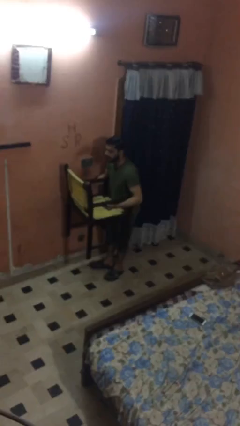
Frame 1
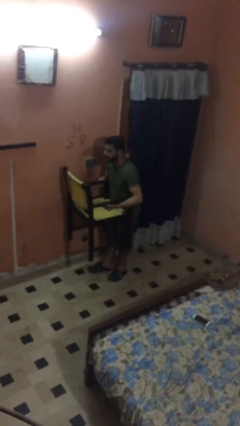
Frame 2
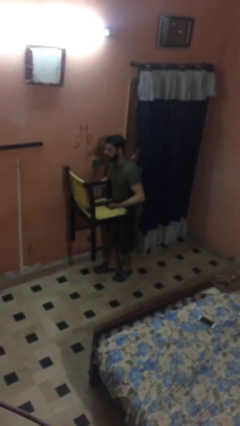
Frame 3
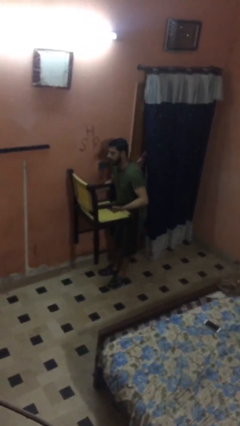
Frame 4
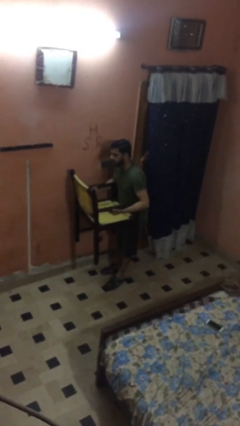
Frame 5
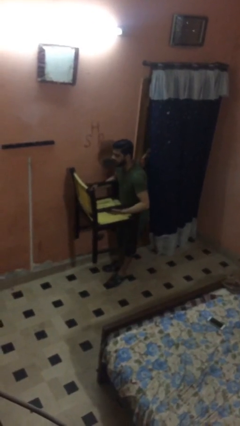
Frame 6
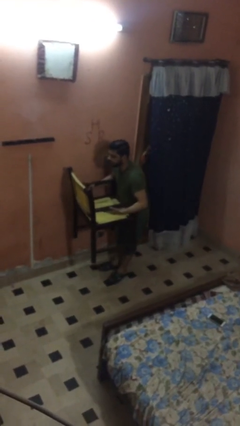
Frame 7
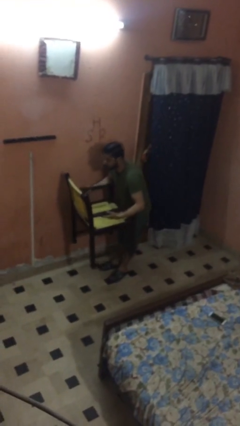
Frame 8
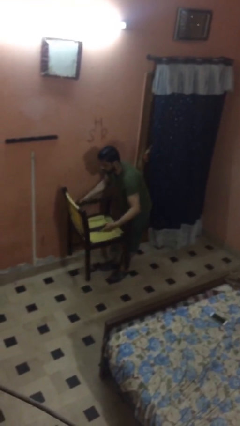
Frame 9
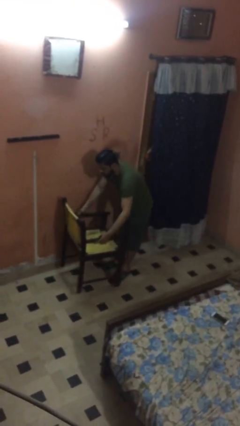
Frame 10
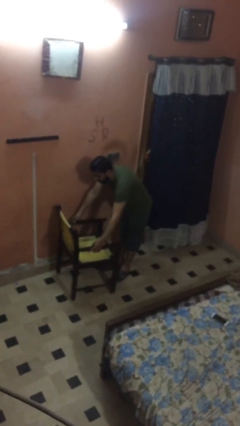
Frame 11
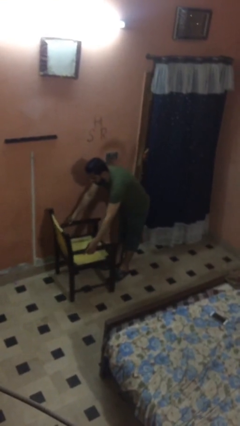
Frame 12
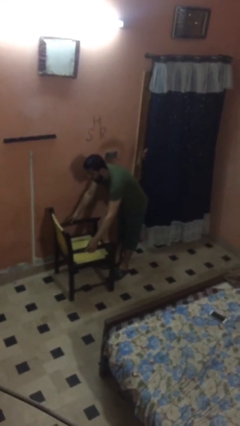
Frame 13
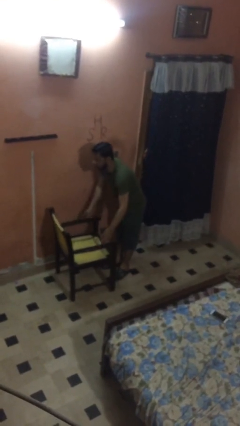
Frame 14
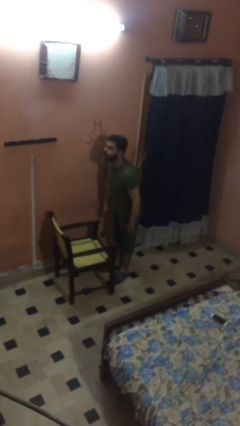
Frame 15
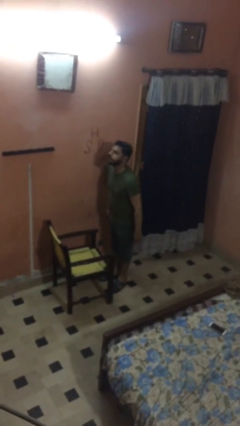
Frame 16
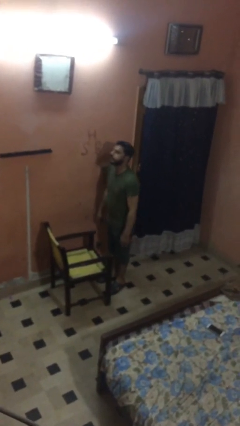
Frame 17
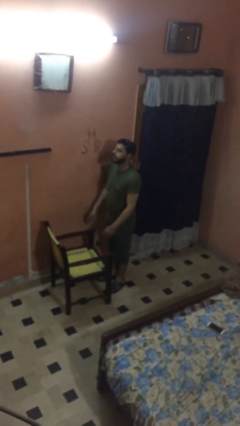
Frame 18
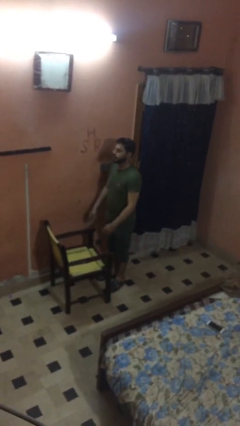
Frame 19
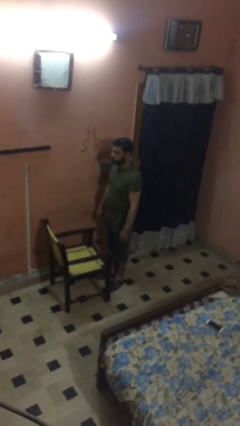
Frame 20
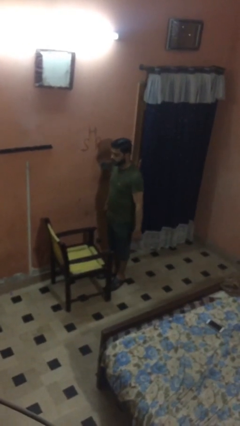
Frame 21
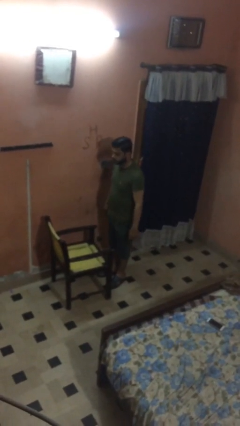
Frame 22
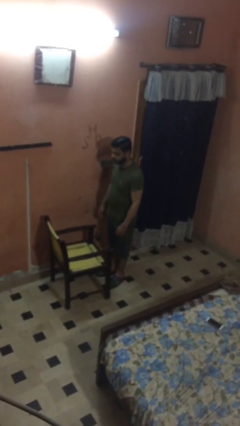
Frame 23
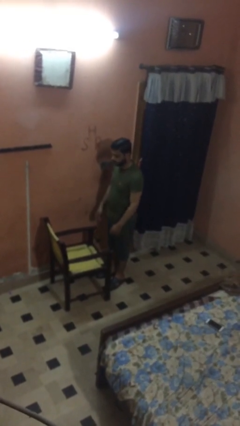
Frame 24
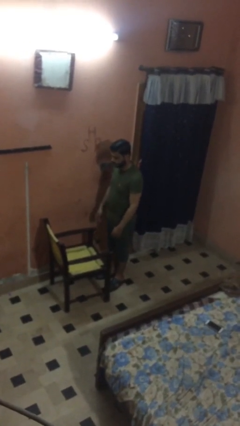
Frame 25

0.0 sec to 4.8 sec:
person puts down object on floor

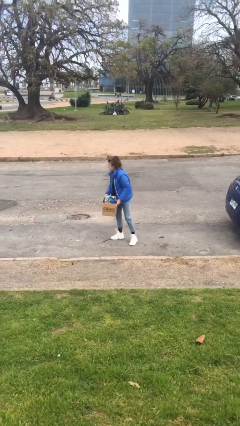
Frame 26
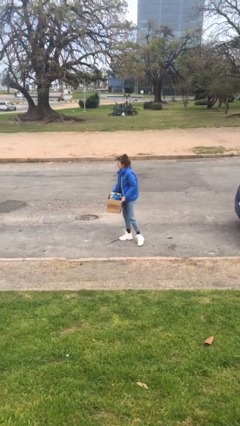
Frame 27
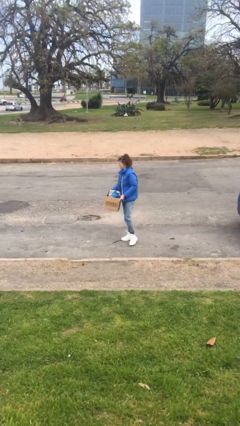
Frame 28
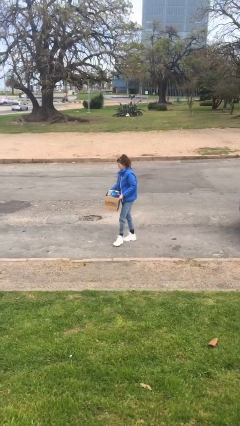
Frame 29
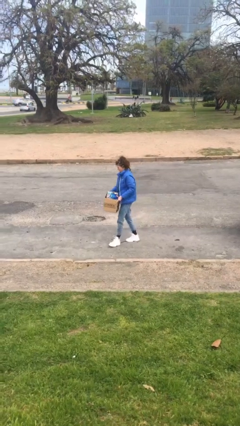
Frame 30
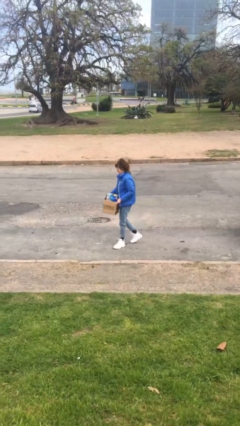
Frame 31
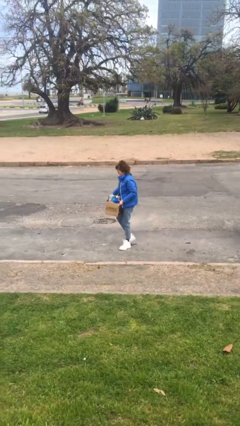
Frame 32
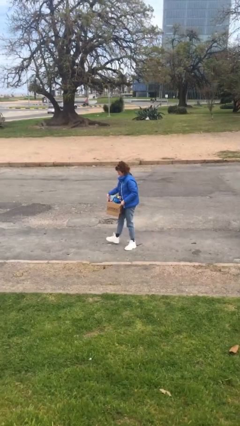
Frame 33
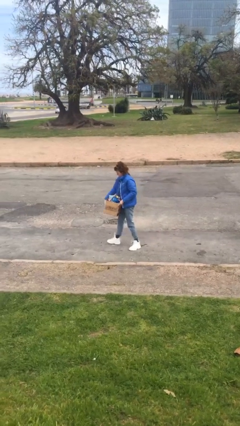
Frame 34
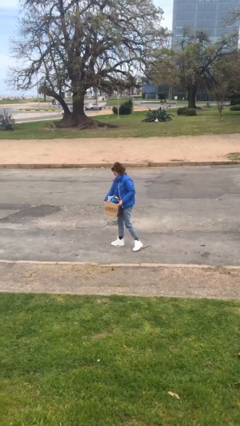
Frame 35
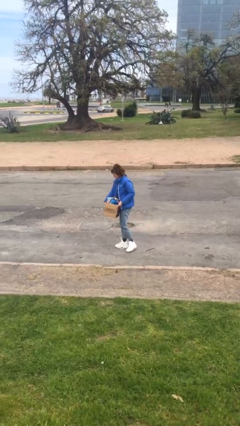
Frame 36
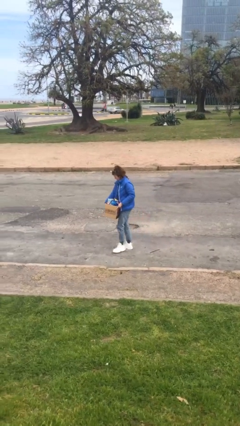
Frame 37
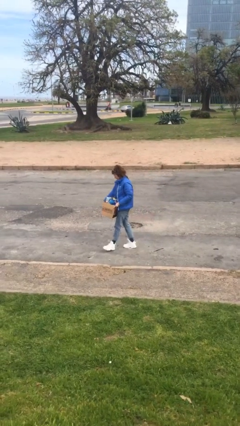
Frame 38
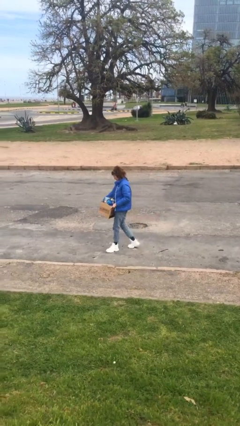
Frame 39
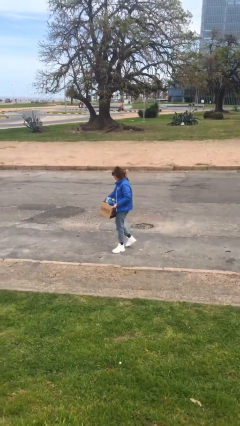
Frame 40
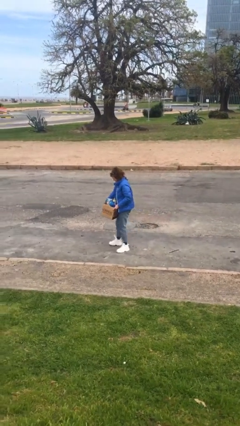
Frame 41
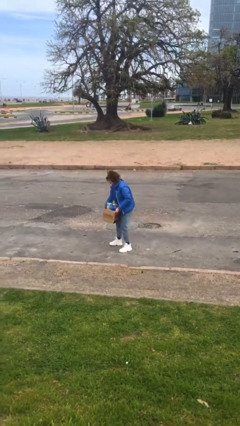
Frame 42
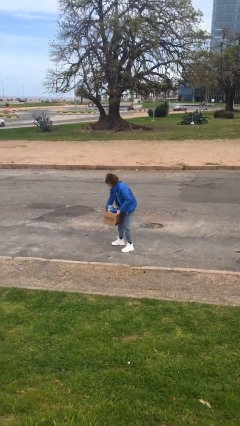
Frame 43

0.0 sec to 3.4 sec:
person carries heavy object

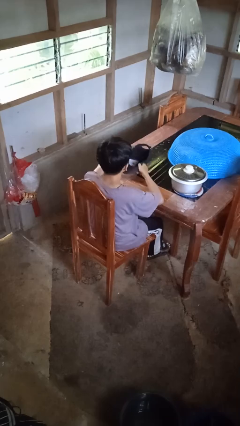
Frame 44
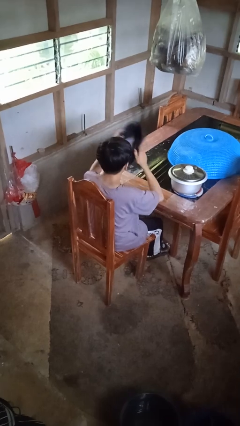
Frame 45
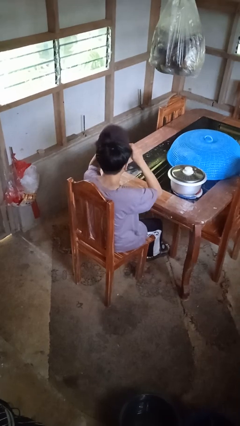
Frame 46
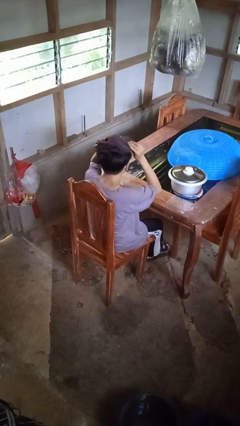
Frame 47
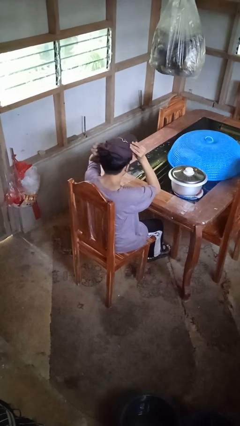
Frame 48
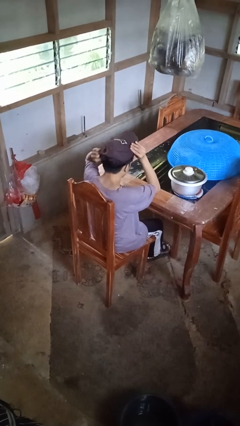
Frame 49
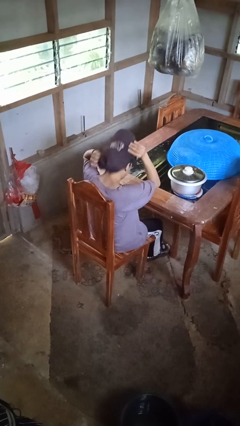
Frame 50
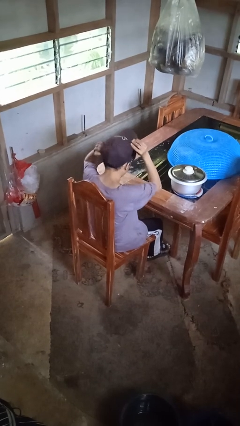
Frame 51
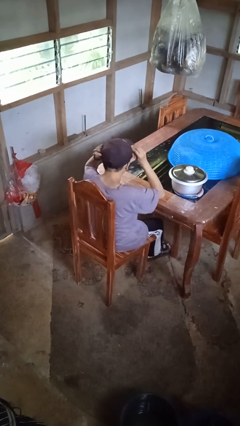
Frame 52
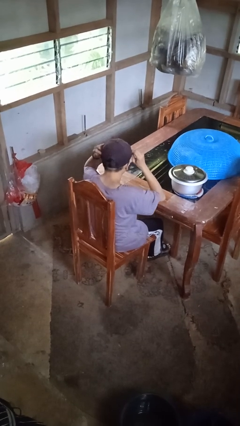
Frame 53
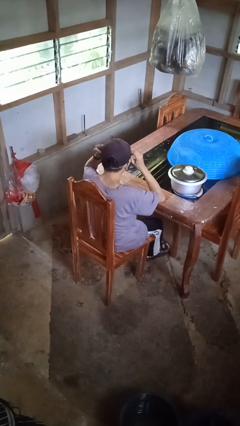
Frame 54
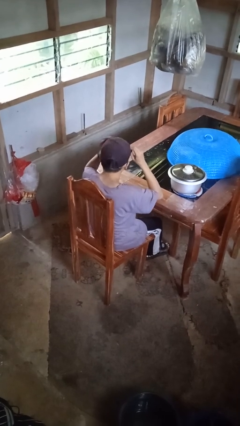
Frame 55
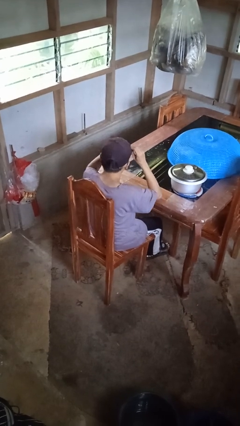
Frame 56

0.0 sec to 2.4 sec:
person puts on hat

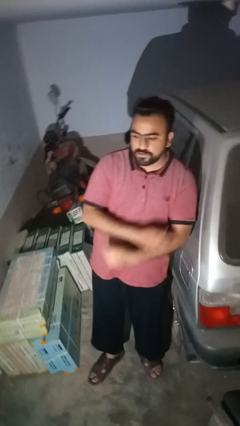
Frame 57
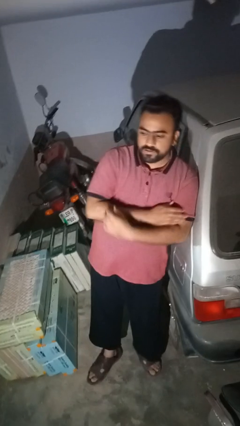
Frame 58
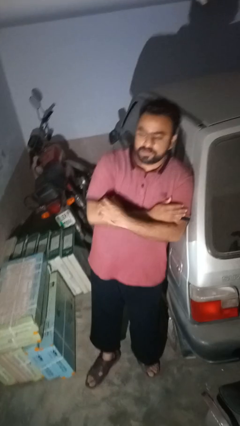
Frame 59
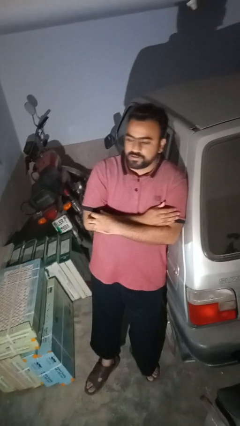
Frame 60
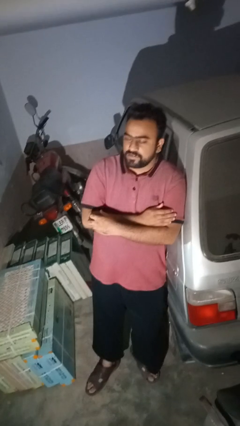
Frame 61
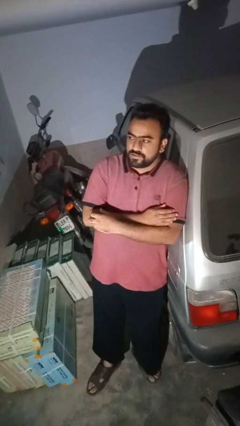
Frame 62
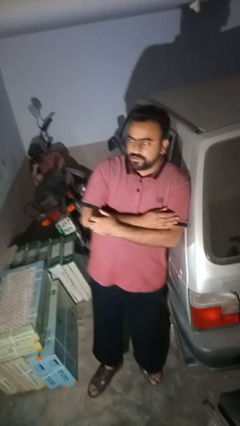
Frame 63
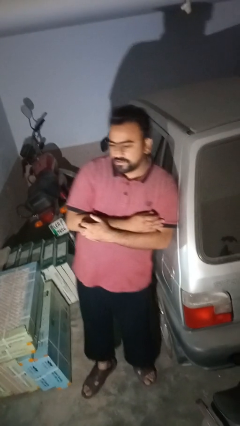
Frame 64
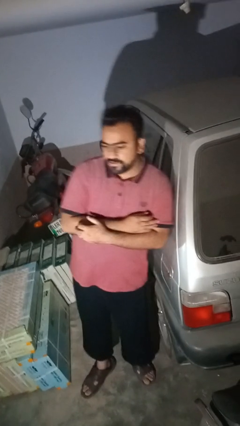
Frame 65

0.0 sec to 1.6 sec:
person leans against car

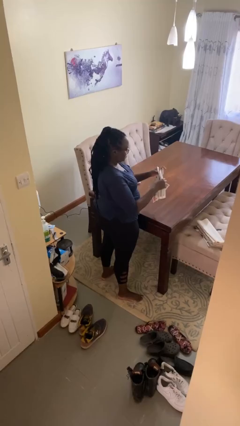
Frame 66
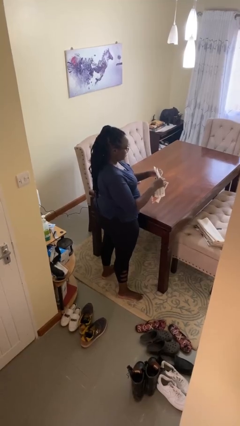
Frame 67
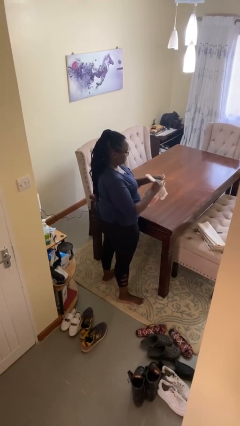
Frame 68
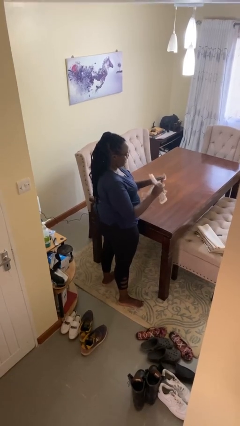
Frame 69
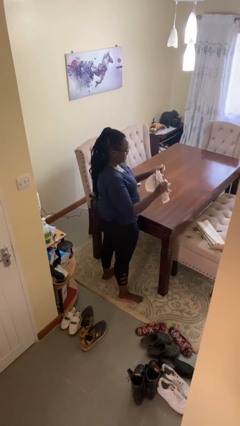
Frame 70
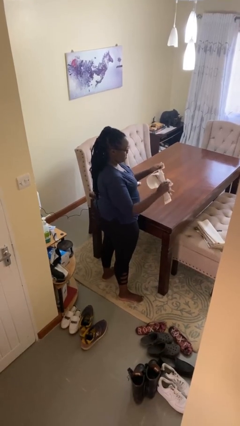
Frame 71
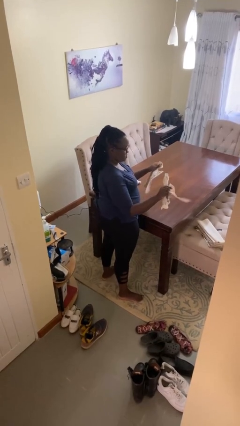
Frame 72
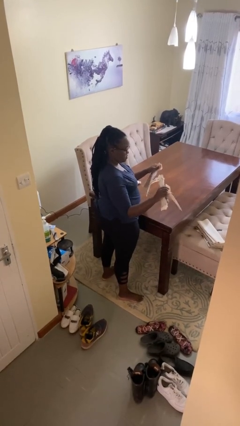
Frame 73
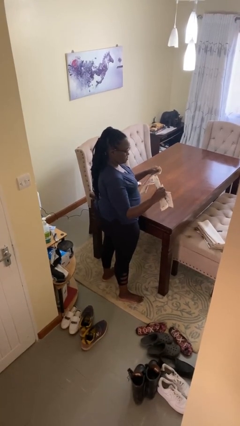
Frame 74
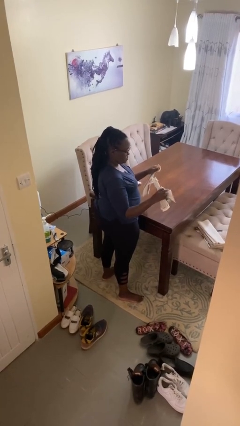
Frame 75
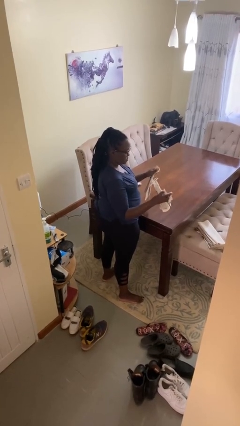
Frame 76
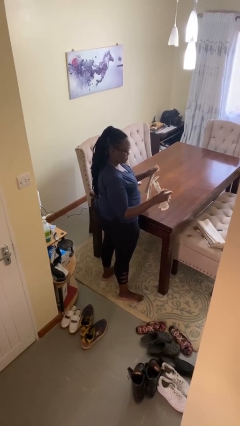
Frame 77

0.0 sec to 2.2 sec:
person tears paper

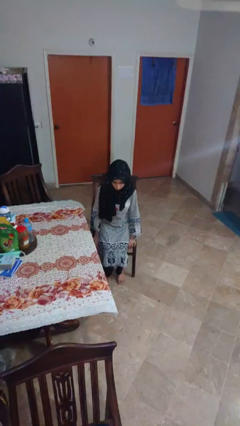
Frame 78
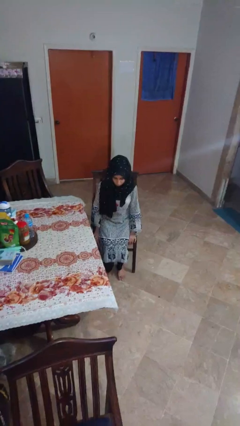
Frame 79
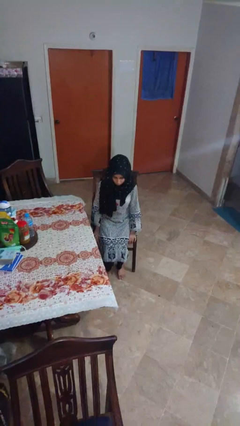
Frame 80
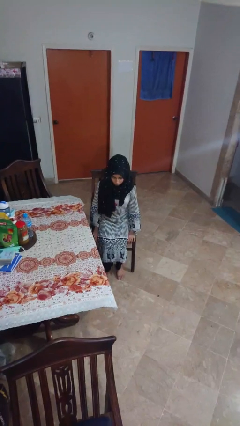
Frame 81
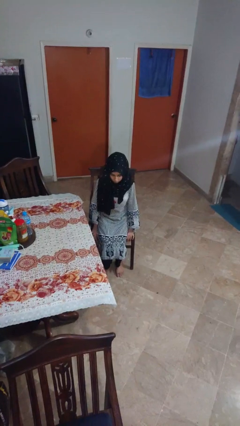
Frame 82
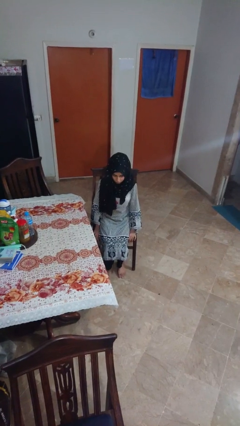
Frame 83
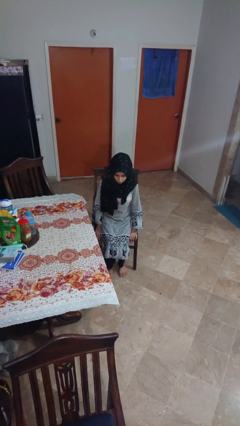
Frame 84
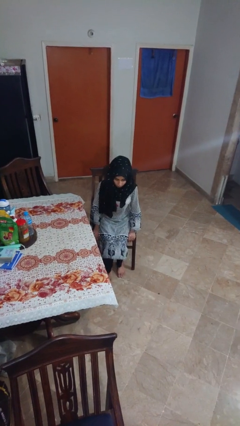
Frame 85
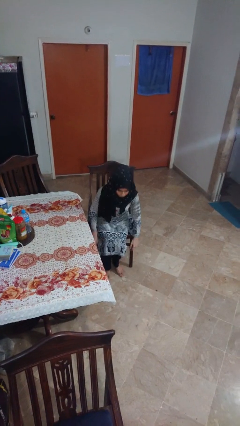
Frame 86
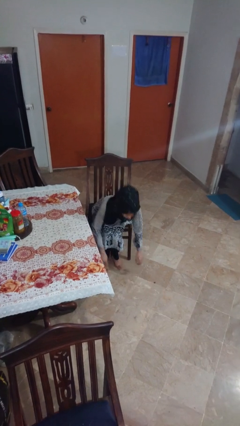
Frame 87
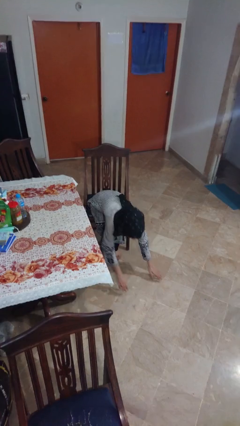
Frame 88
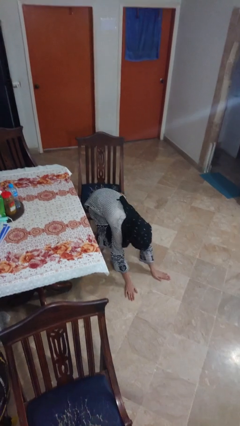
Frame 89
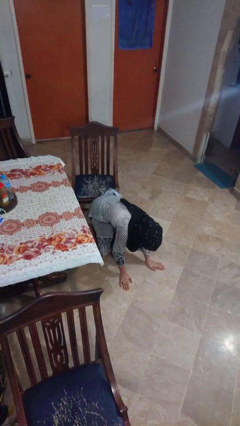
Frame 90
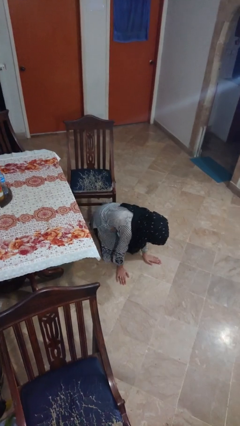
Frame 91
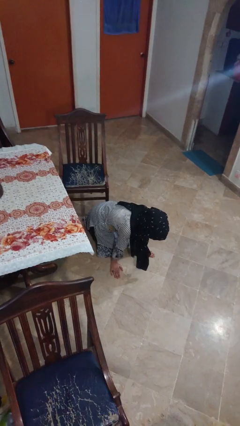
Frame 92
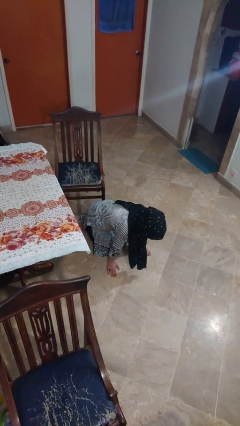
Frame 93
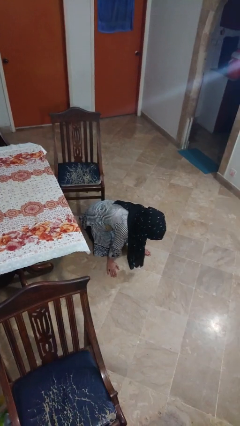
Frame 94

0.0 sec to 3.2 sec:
person falls from chair
